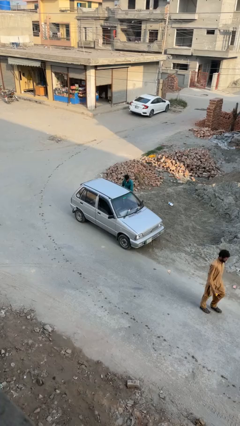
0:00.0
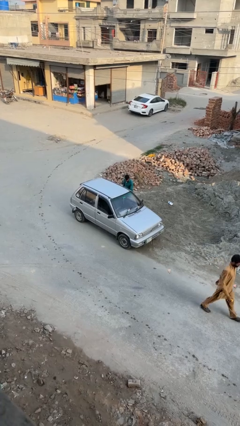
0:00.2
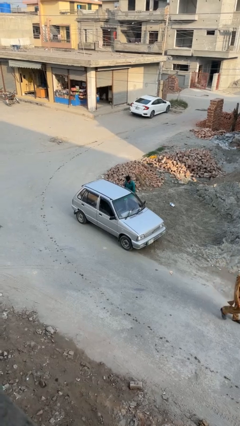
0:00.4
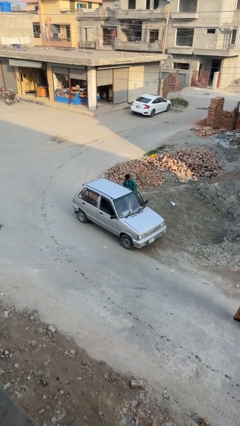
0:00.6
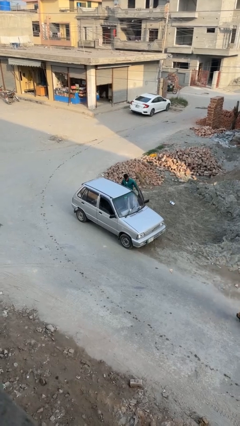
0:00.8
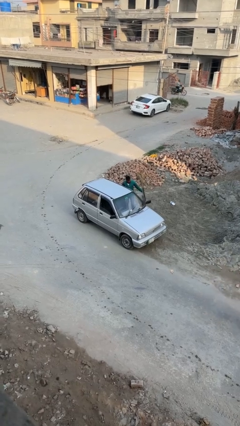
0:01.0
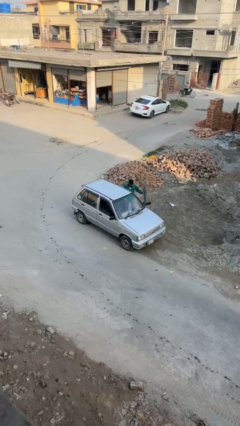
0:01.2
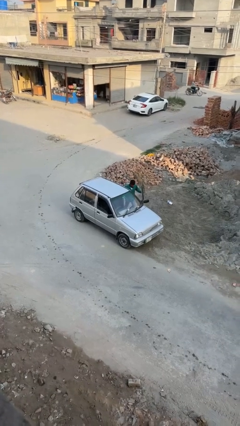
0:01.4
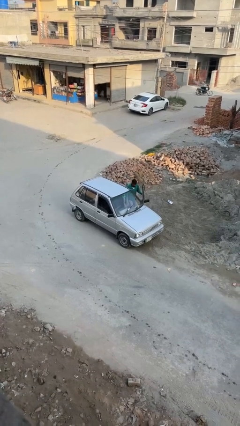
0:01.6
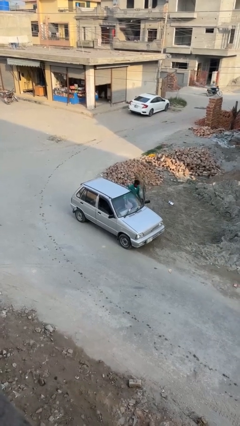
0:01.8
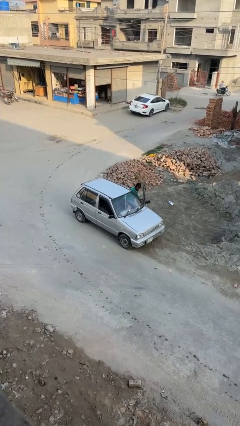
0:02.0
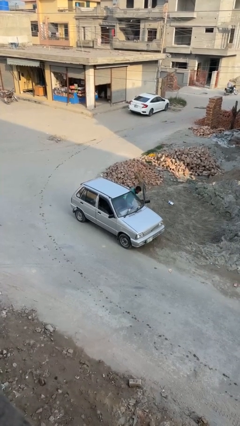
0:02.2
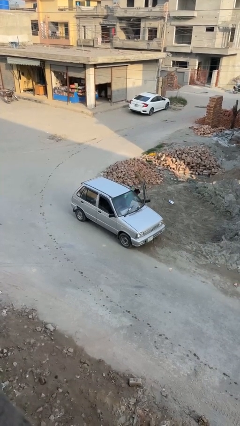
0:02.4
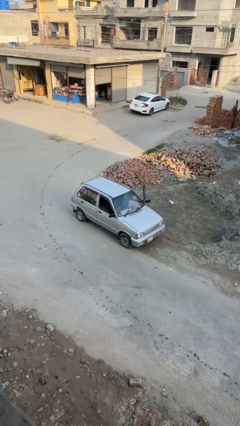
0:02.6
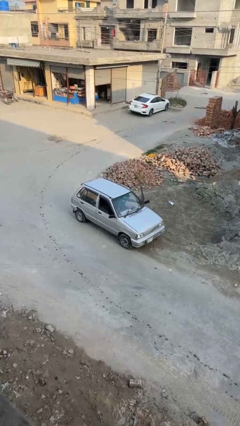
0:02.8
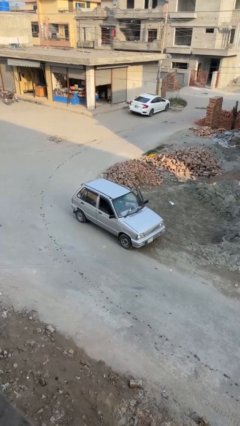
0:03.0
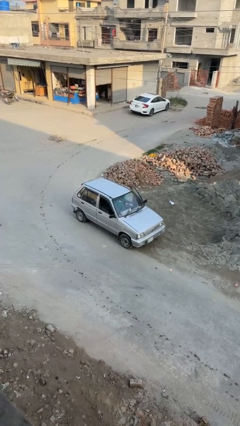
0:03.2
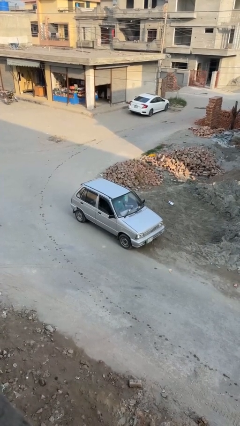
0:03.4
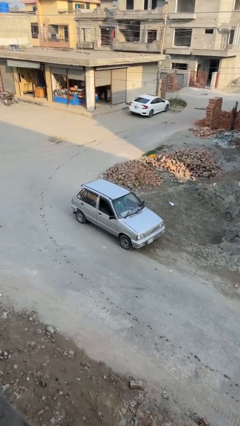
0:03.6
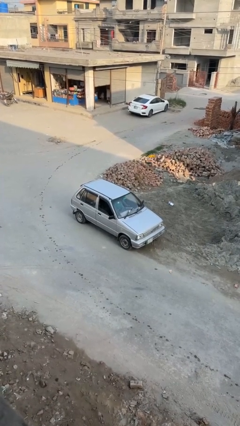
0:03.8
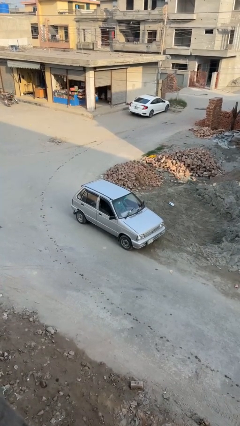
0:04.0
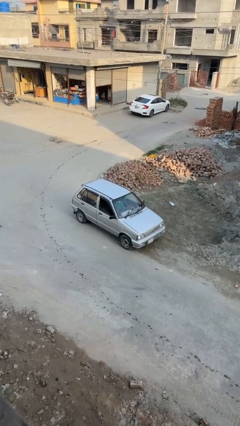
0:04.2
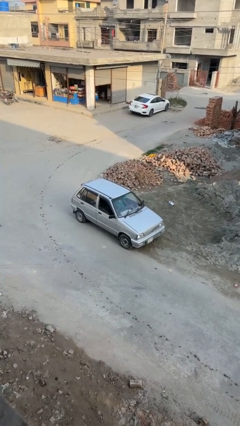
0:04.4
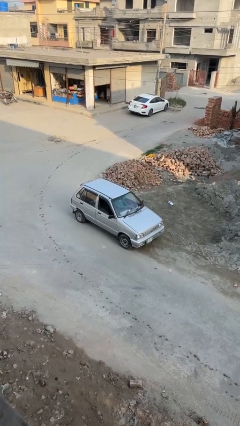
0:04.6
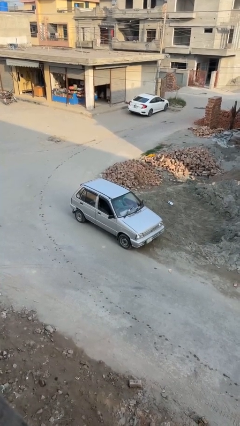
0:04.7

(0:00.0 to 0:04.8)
car picks up person

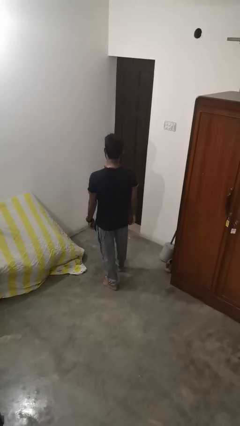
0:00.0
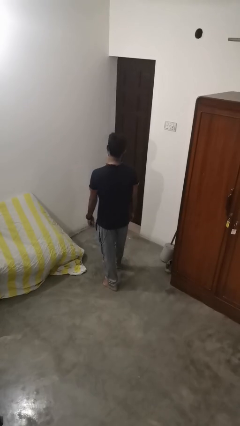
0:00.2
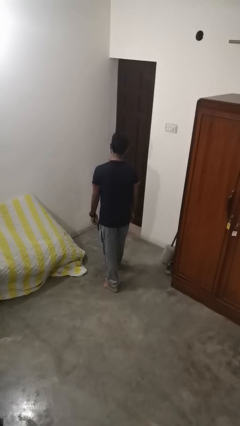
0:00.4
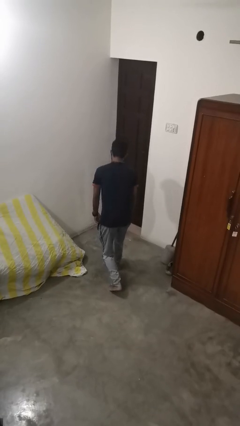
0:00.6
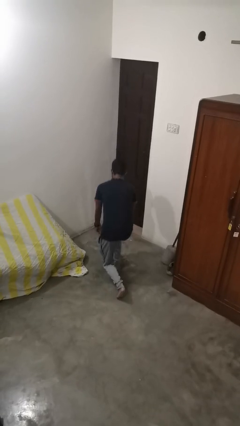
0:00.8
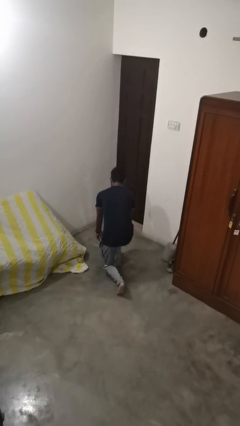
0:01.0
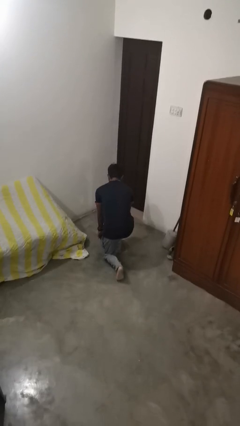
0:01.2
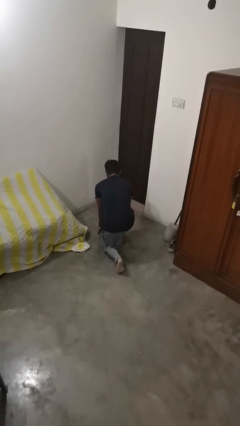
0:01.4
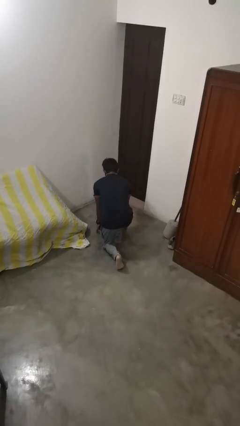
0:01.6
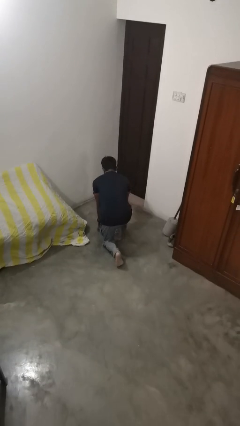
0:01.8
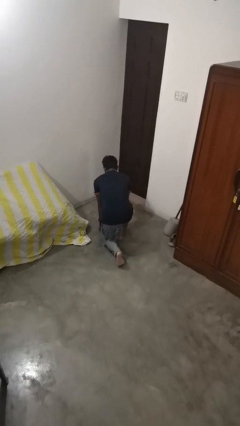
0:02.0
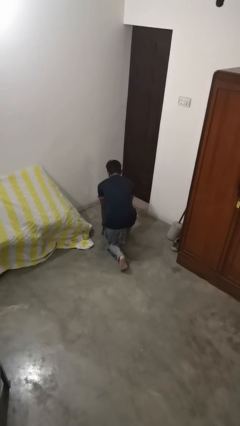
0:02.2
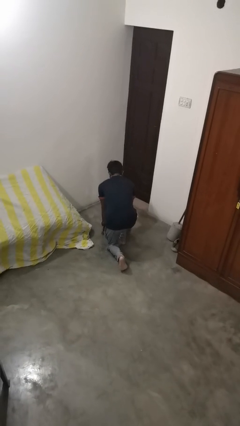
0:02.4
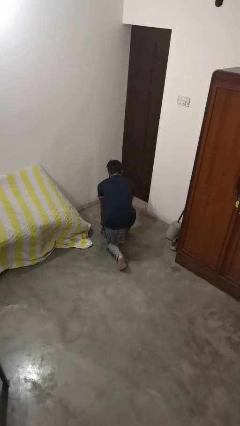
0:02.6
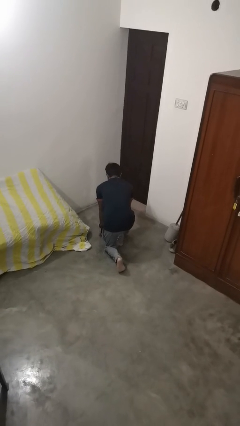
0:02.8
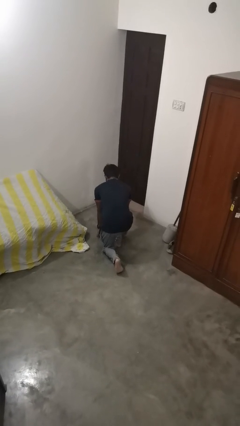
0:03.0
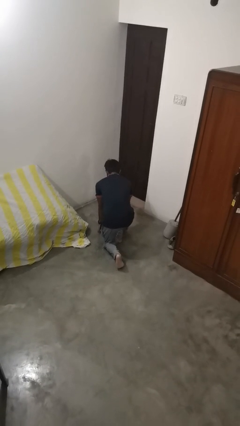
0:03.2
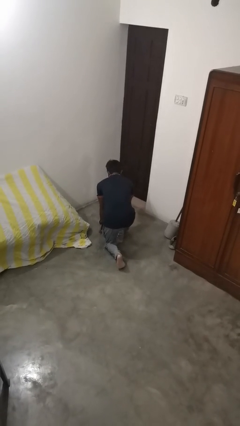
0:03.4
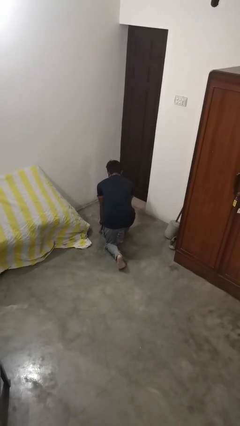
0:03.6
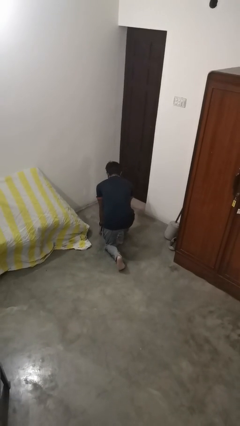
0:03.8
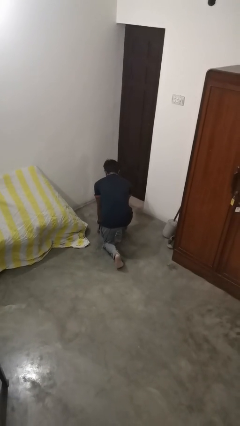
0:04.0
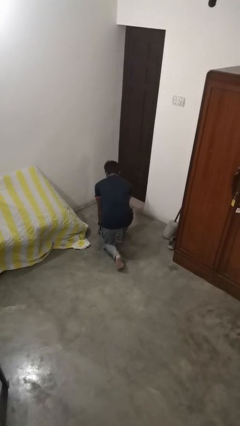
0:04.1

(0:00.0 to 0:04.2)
person kneels

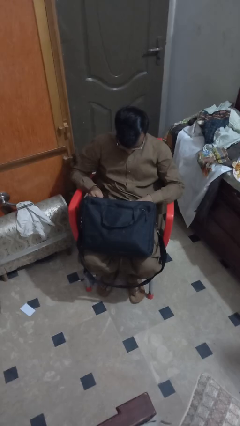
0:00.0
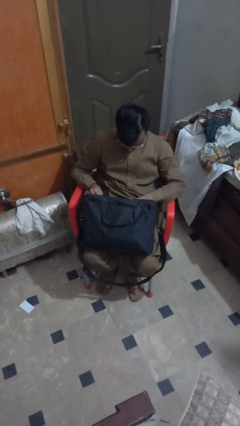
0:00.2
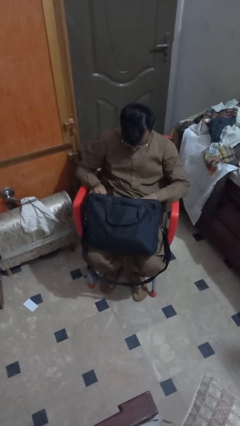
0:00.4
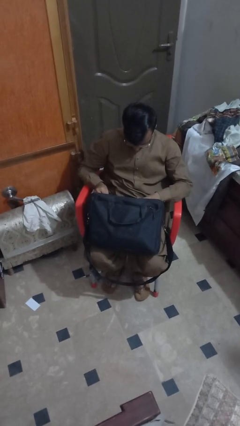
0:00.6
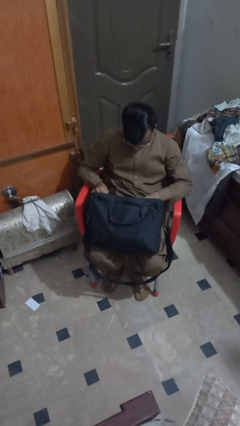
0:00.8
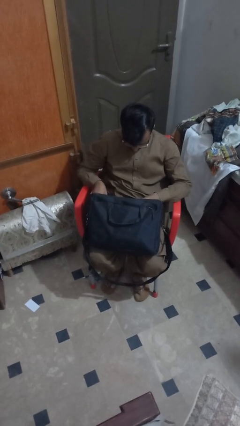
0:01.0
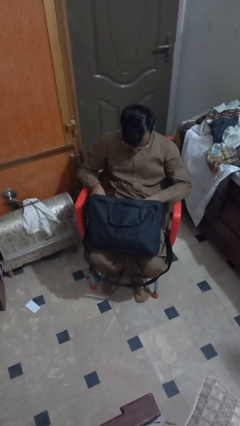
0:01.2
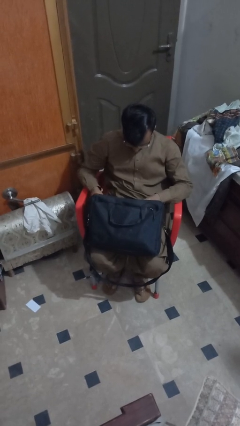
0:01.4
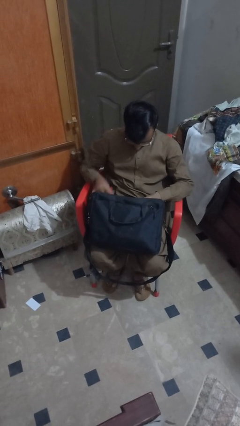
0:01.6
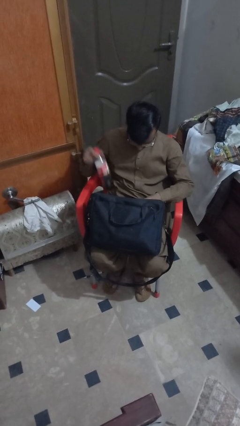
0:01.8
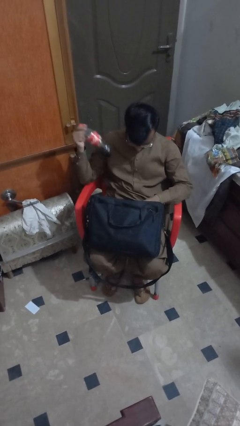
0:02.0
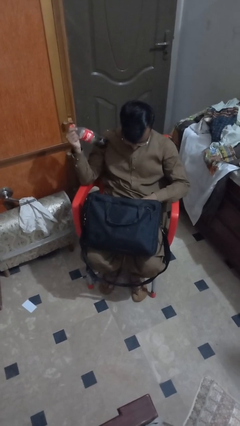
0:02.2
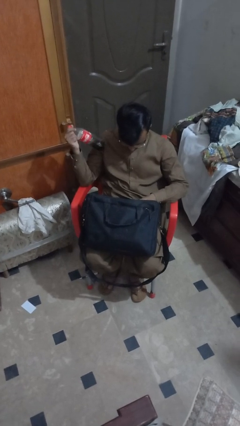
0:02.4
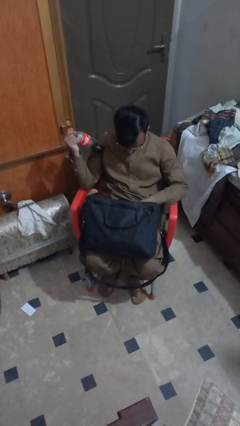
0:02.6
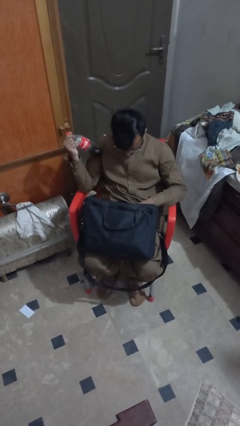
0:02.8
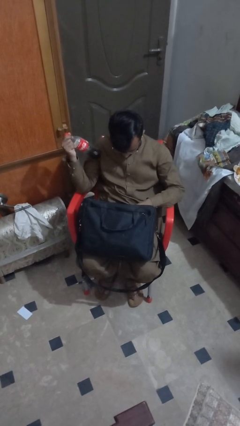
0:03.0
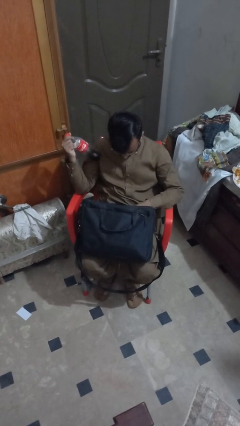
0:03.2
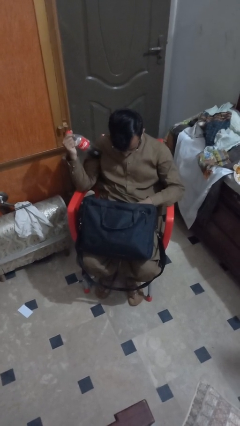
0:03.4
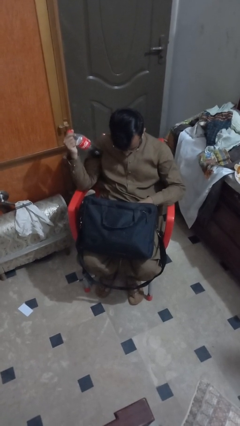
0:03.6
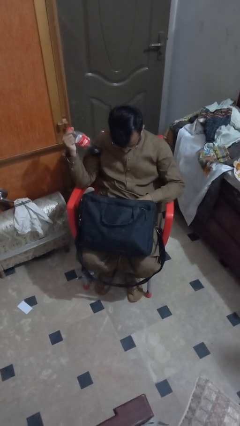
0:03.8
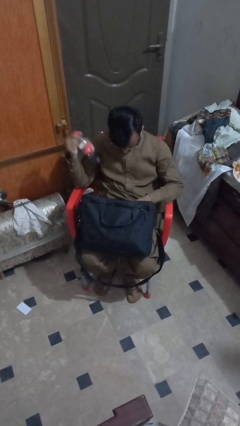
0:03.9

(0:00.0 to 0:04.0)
person takes object from bag

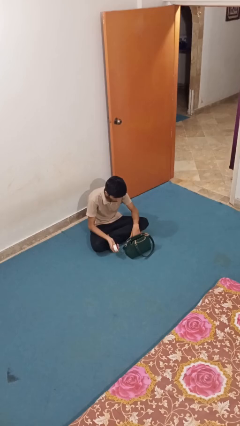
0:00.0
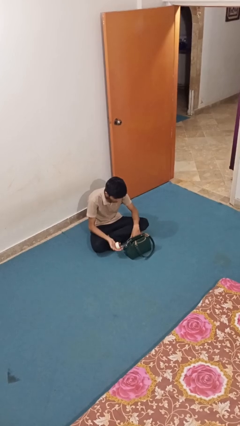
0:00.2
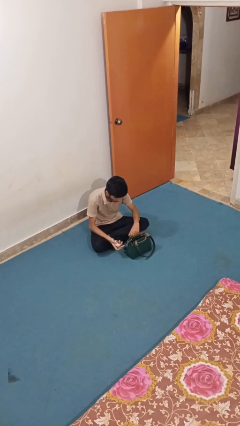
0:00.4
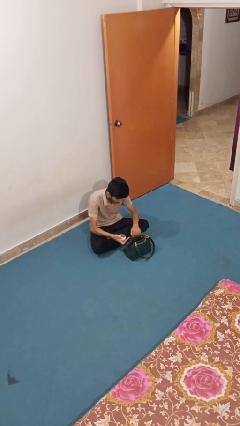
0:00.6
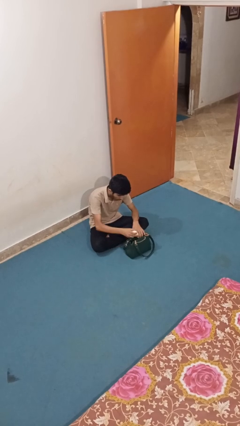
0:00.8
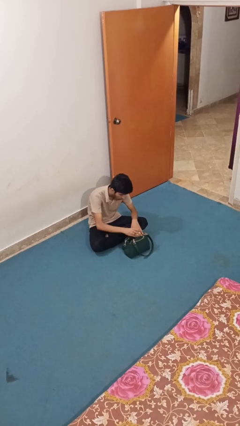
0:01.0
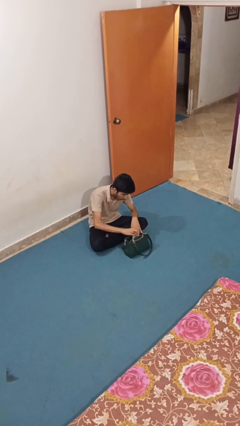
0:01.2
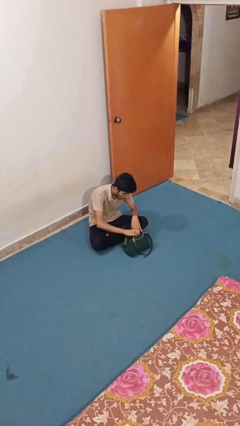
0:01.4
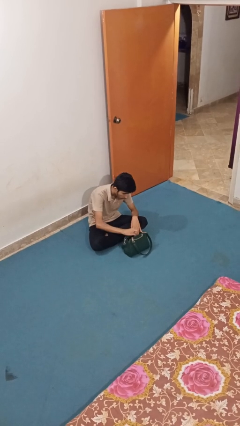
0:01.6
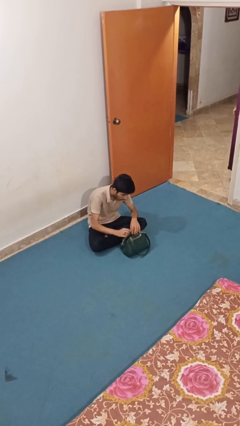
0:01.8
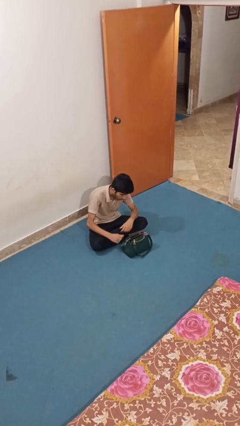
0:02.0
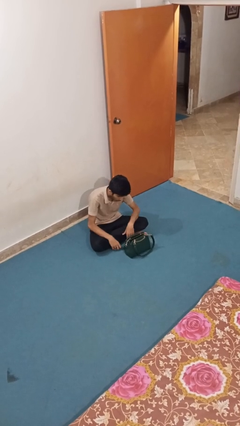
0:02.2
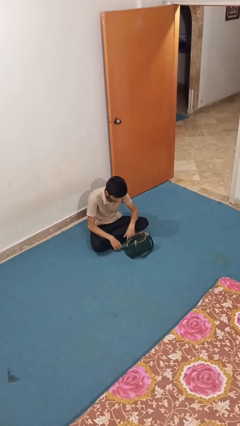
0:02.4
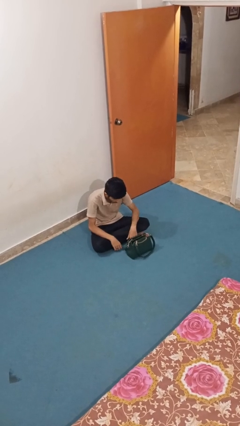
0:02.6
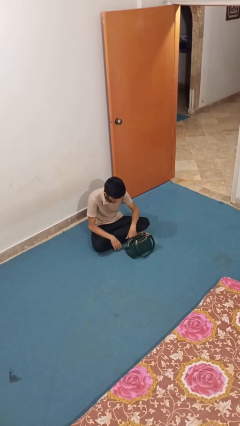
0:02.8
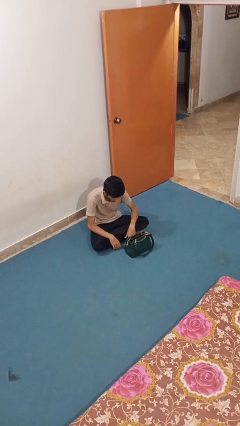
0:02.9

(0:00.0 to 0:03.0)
person puts object into purse

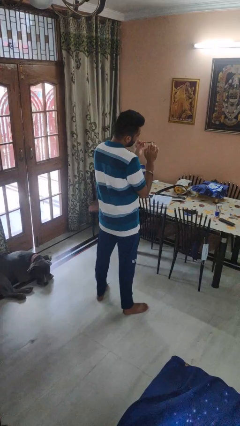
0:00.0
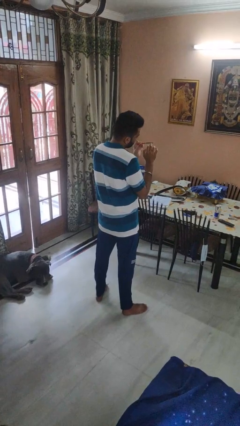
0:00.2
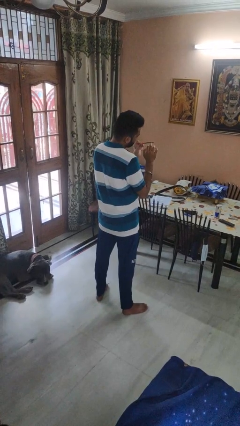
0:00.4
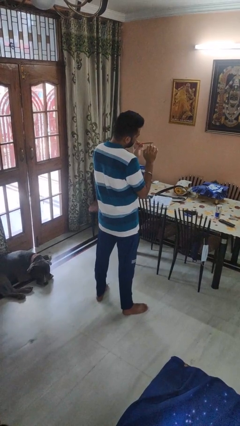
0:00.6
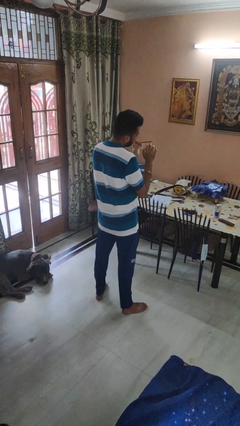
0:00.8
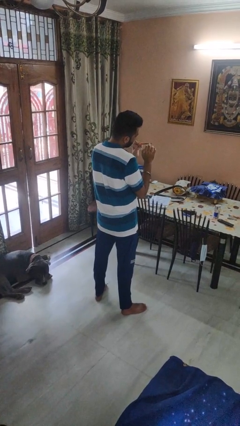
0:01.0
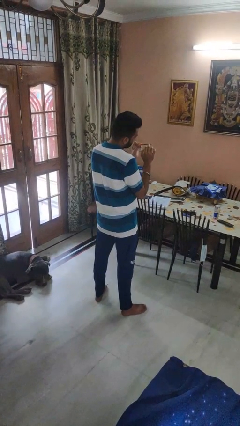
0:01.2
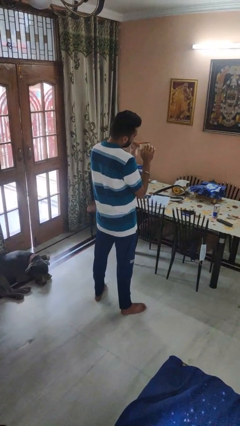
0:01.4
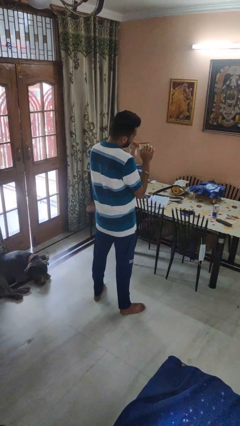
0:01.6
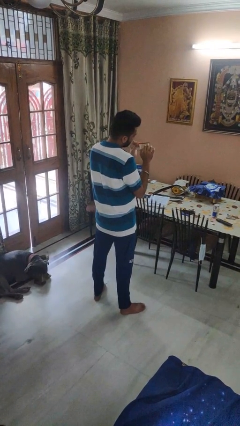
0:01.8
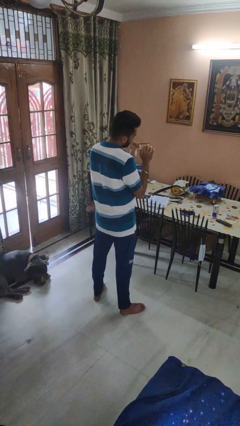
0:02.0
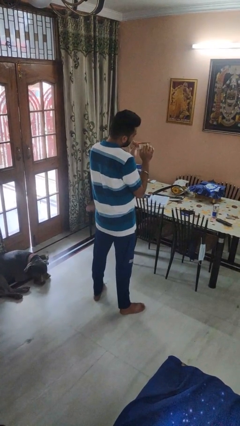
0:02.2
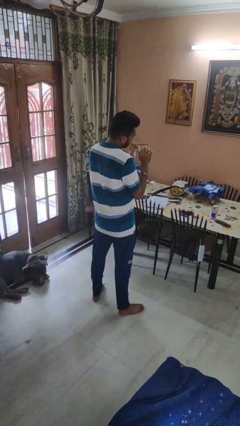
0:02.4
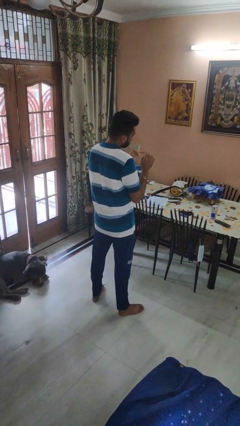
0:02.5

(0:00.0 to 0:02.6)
person files fingernails
